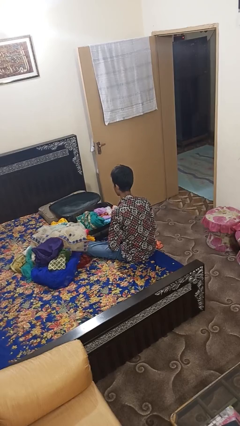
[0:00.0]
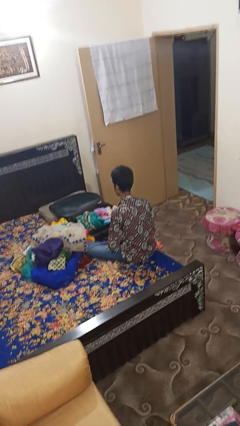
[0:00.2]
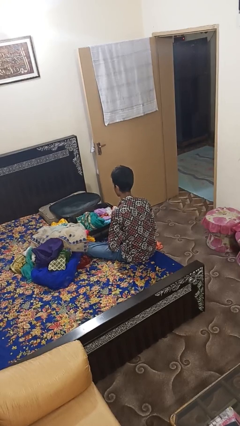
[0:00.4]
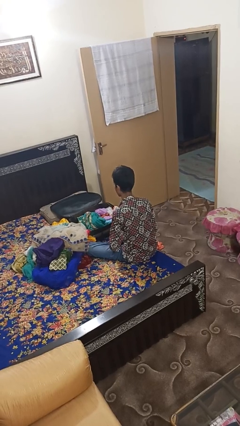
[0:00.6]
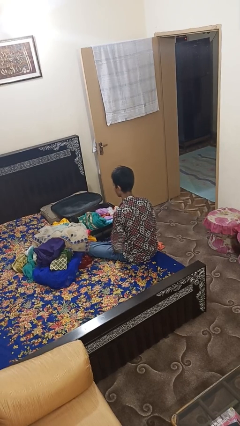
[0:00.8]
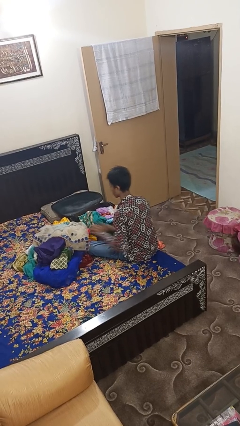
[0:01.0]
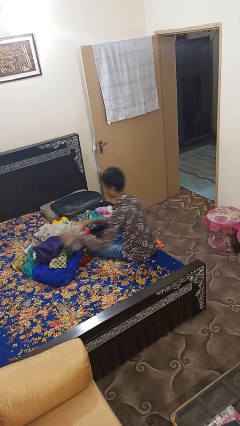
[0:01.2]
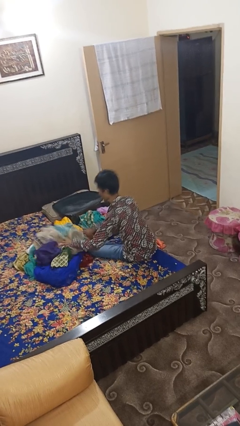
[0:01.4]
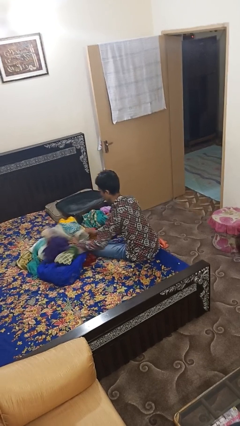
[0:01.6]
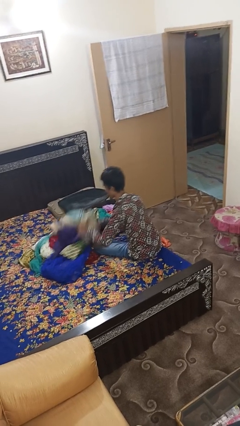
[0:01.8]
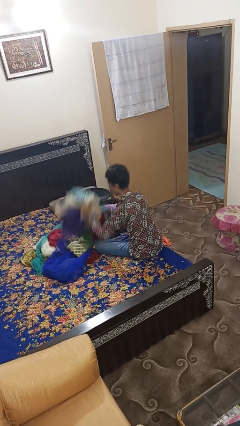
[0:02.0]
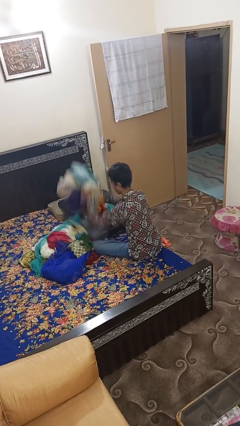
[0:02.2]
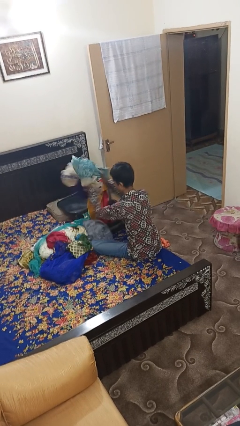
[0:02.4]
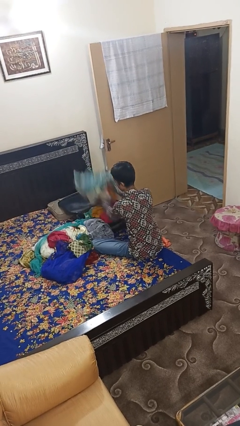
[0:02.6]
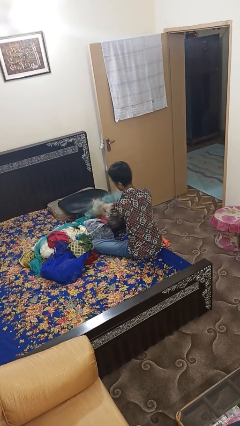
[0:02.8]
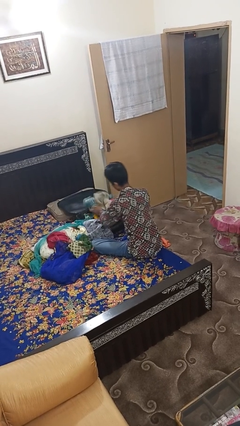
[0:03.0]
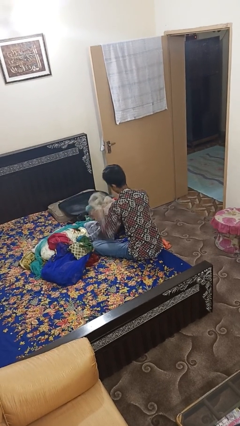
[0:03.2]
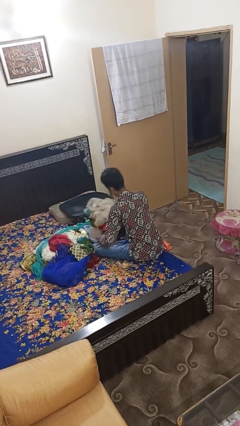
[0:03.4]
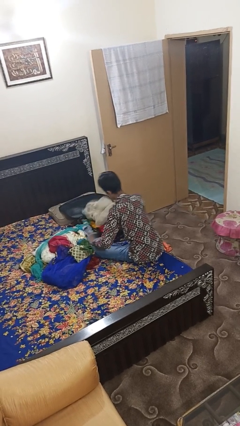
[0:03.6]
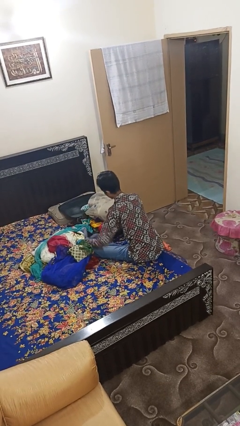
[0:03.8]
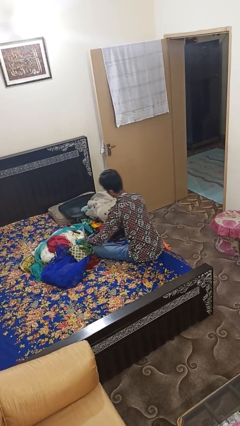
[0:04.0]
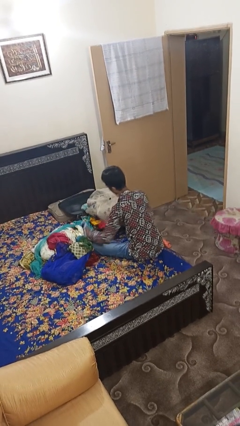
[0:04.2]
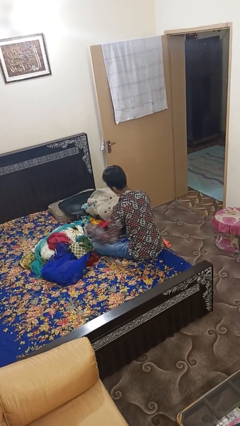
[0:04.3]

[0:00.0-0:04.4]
person loads clothes into suitcase

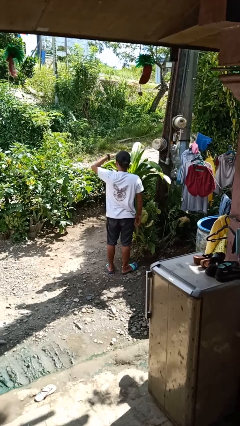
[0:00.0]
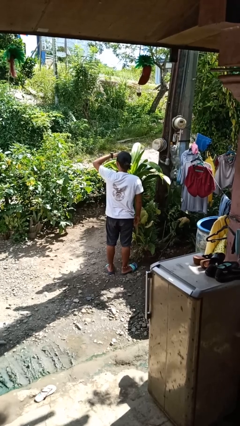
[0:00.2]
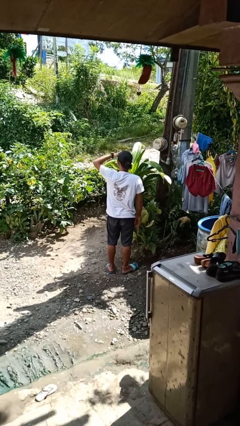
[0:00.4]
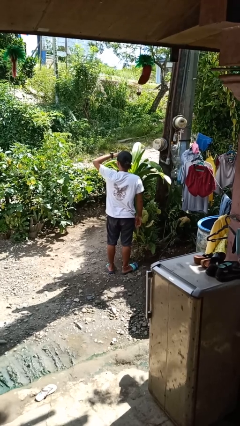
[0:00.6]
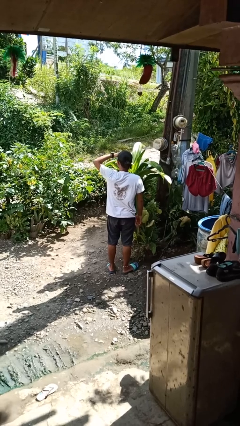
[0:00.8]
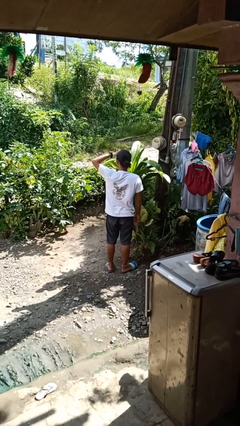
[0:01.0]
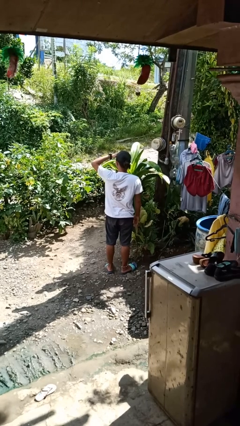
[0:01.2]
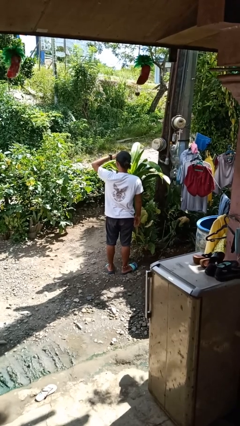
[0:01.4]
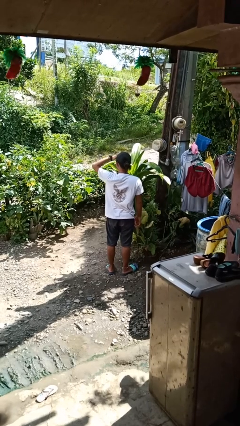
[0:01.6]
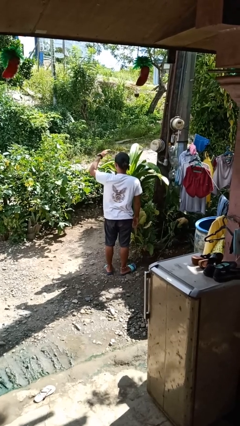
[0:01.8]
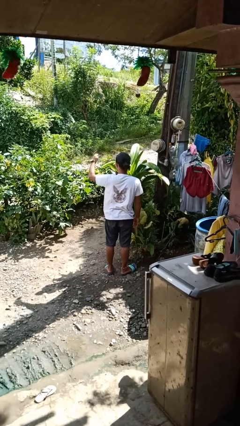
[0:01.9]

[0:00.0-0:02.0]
person shades eyes

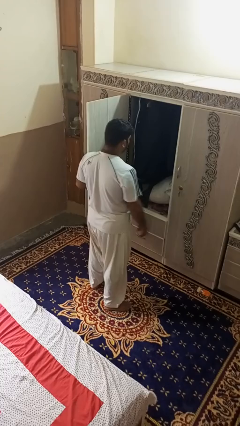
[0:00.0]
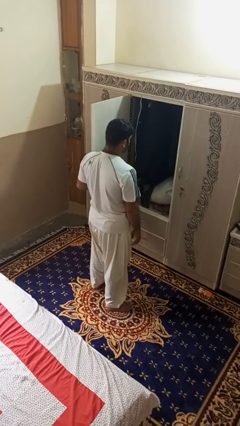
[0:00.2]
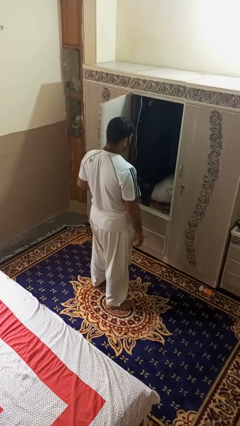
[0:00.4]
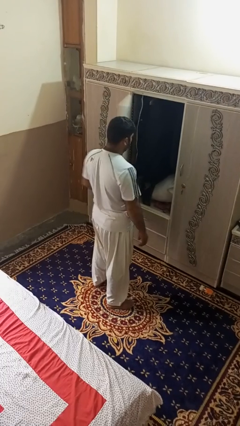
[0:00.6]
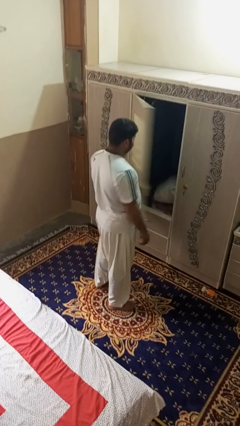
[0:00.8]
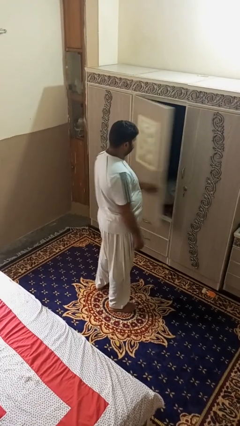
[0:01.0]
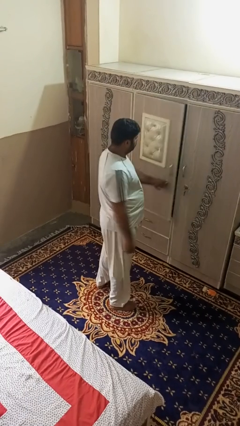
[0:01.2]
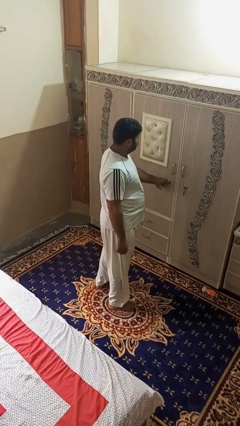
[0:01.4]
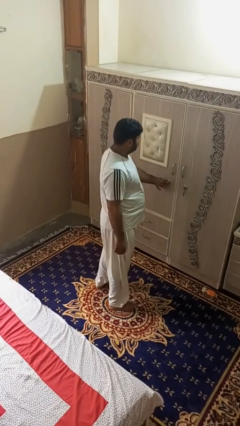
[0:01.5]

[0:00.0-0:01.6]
person closes dresser drawer

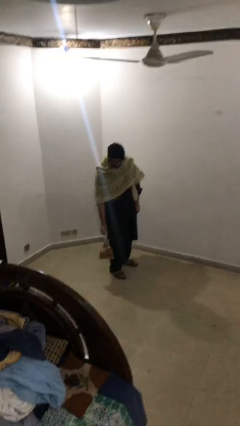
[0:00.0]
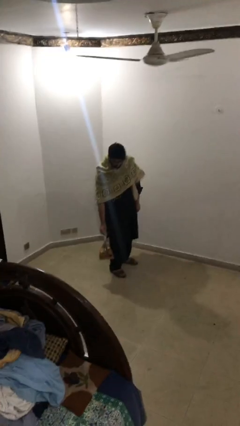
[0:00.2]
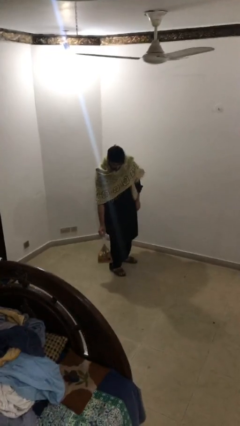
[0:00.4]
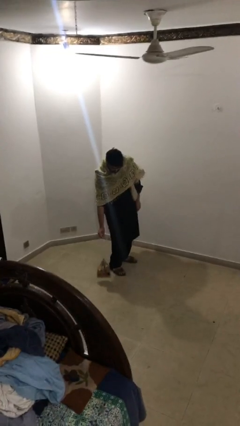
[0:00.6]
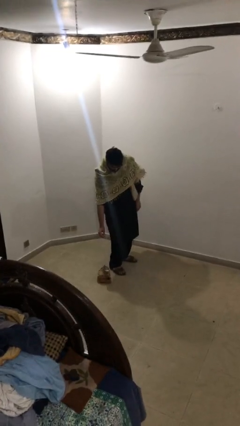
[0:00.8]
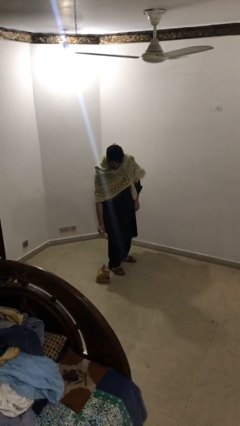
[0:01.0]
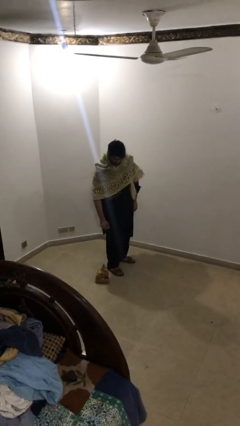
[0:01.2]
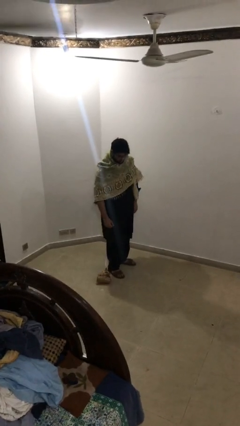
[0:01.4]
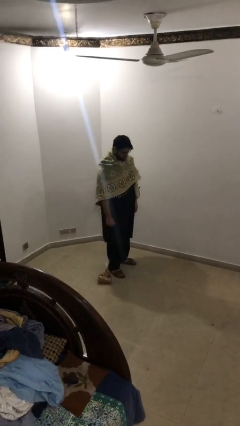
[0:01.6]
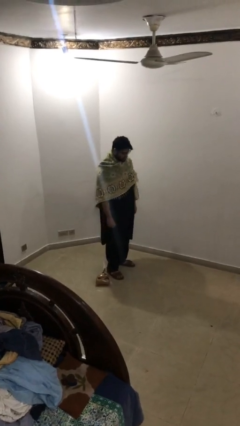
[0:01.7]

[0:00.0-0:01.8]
person puts down object on floor

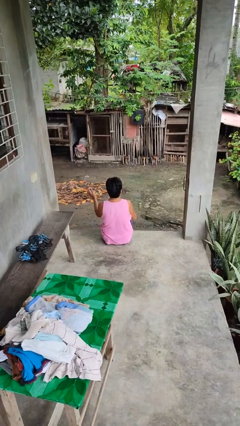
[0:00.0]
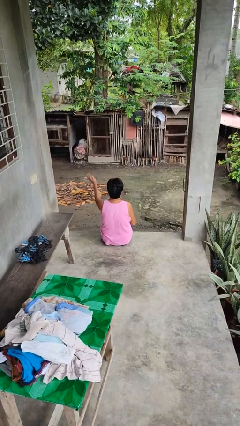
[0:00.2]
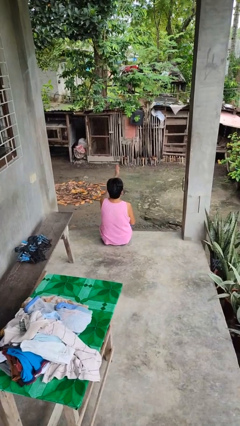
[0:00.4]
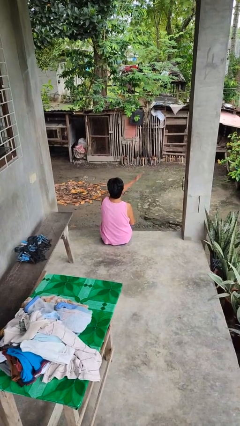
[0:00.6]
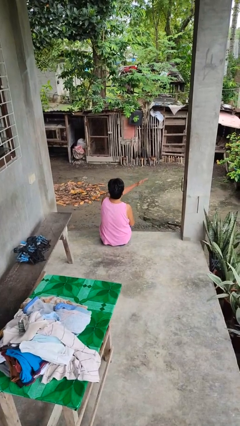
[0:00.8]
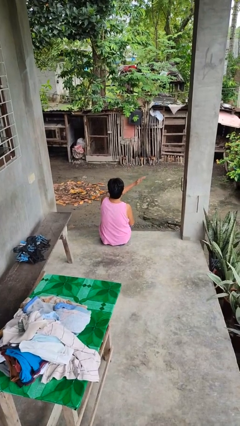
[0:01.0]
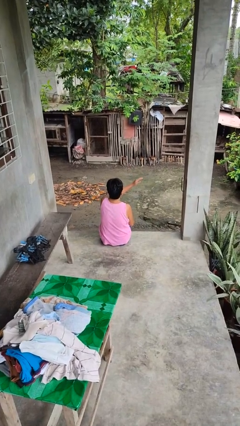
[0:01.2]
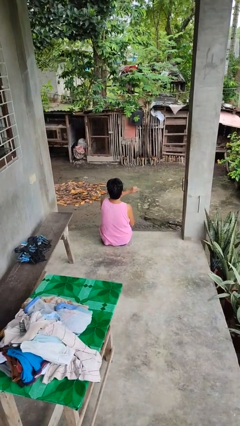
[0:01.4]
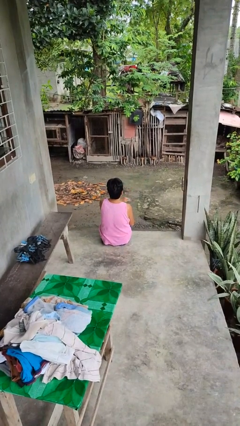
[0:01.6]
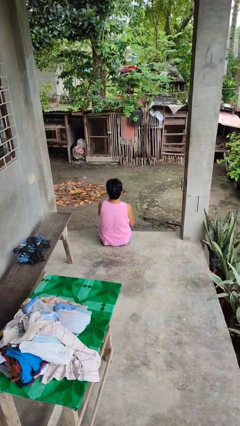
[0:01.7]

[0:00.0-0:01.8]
person gestures swipe right

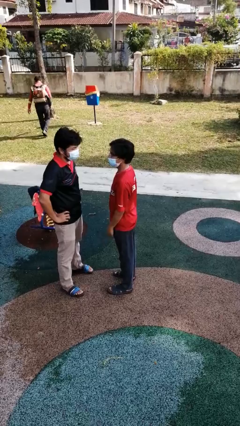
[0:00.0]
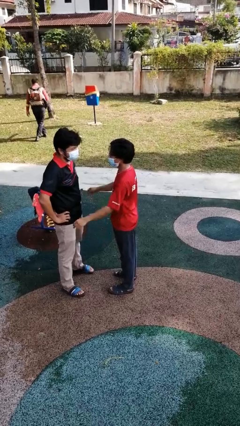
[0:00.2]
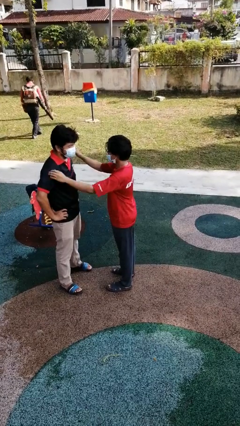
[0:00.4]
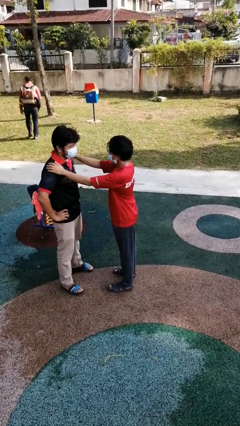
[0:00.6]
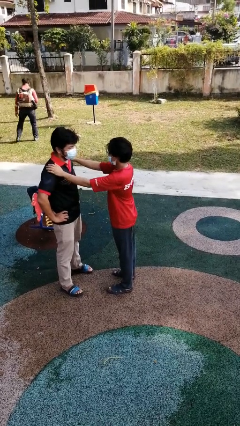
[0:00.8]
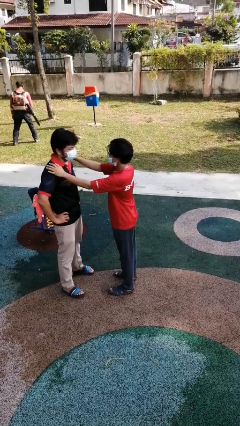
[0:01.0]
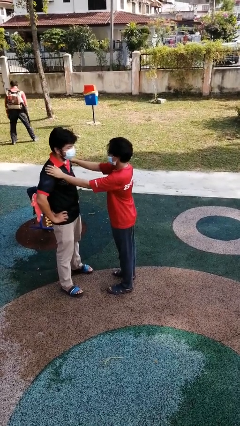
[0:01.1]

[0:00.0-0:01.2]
person pounds shoulders of person

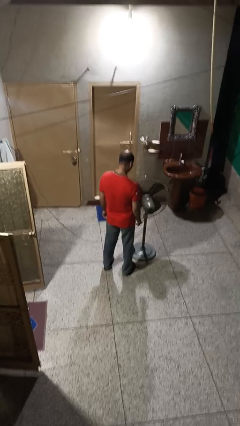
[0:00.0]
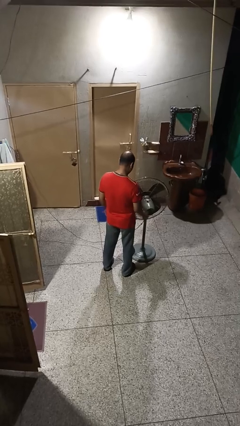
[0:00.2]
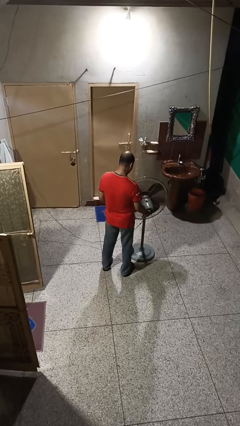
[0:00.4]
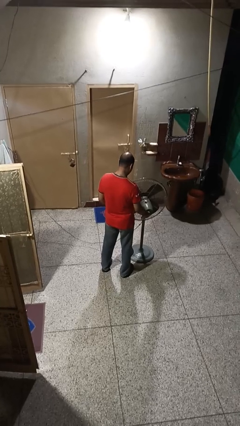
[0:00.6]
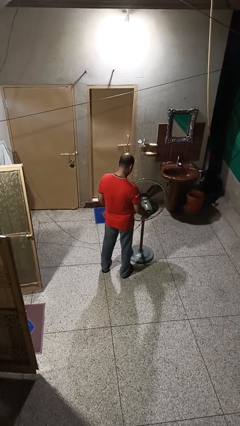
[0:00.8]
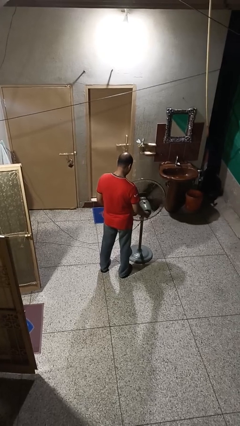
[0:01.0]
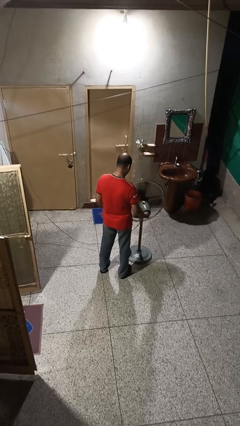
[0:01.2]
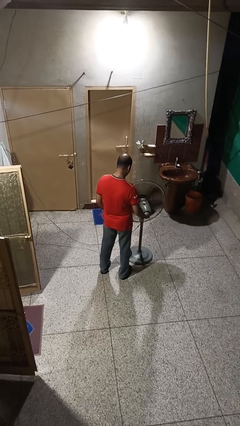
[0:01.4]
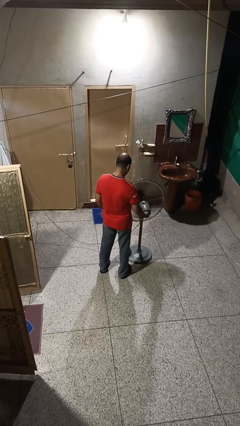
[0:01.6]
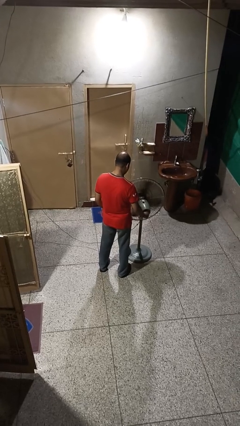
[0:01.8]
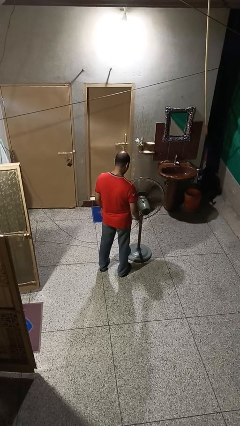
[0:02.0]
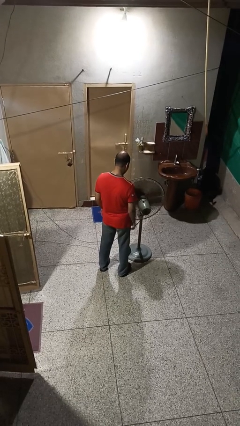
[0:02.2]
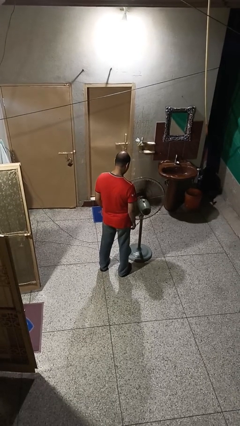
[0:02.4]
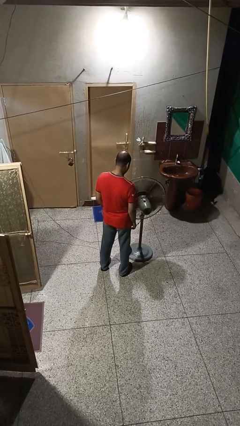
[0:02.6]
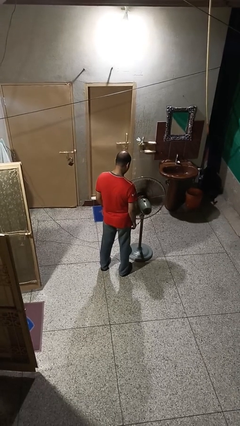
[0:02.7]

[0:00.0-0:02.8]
person turns on fan

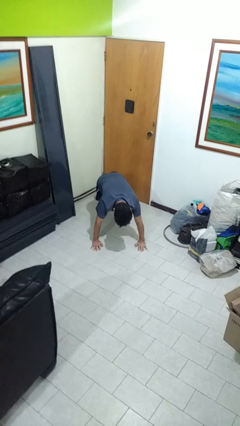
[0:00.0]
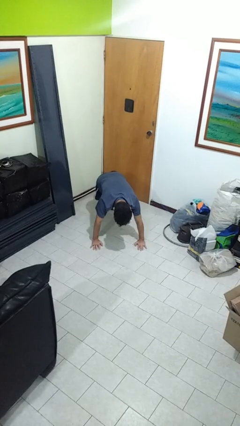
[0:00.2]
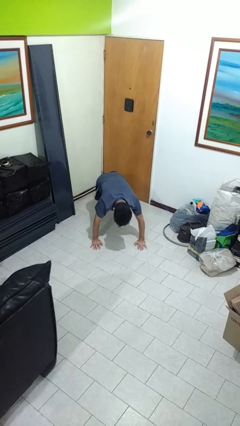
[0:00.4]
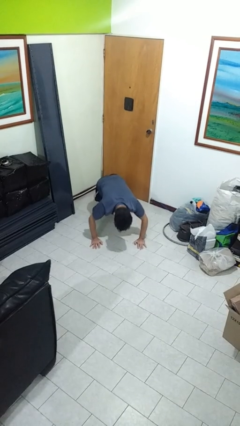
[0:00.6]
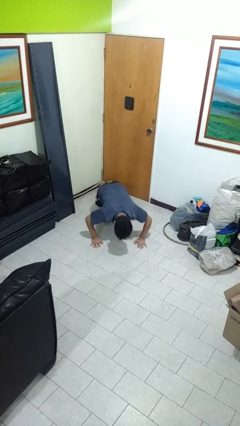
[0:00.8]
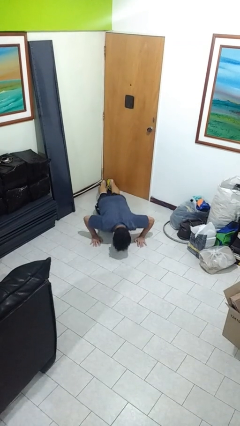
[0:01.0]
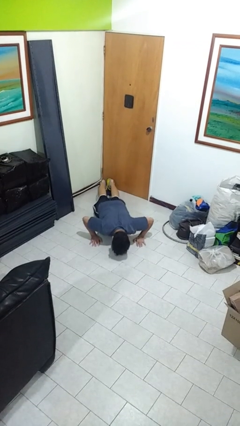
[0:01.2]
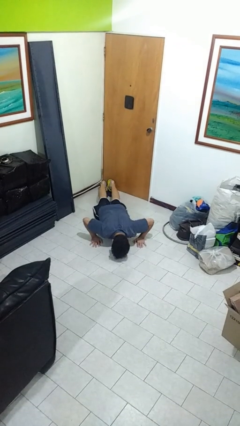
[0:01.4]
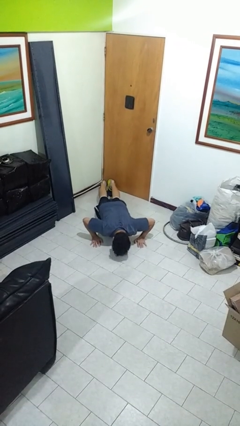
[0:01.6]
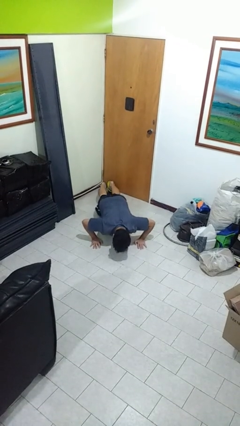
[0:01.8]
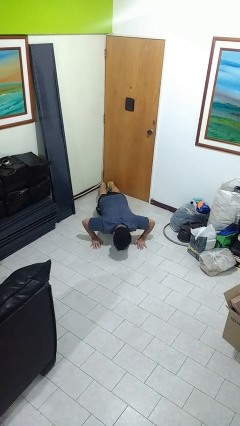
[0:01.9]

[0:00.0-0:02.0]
person exercises with pushup
